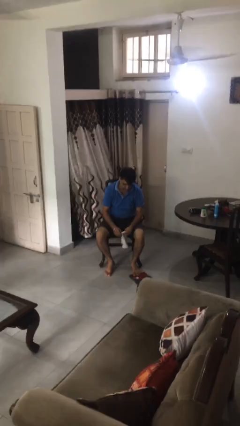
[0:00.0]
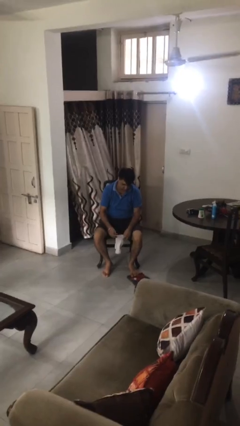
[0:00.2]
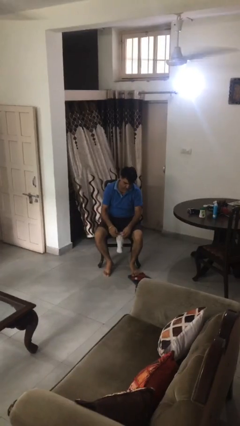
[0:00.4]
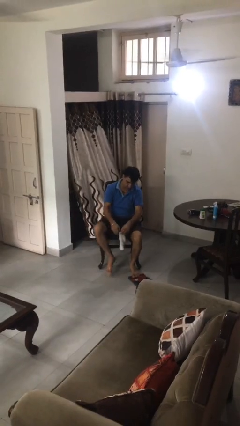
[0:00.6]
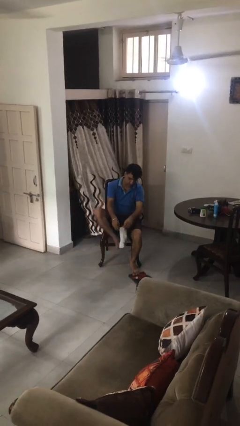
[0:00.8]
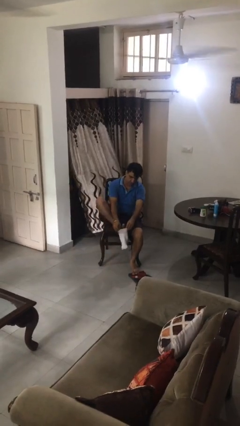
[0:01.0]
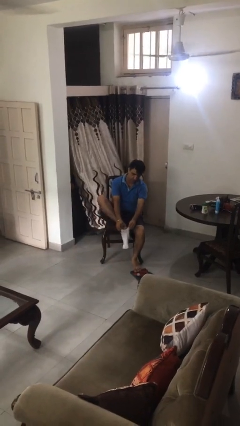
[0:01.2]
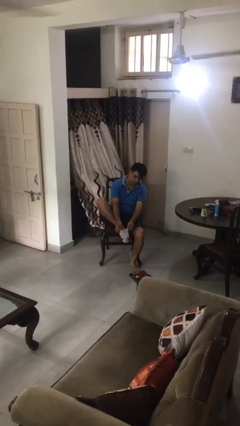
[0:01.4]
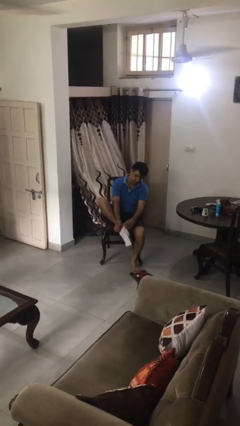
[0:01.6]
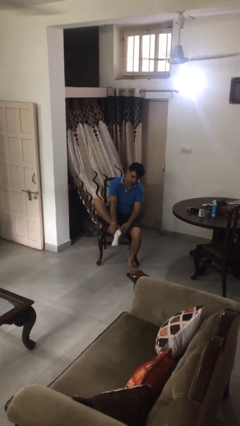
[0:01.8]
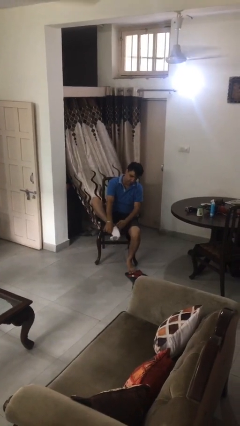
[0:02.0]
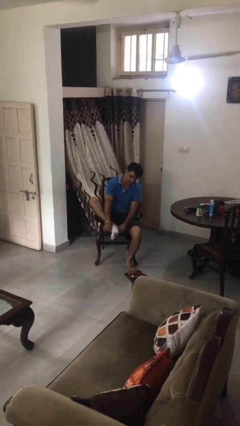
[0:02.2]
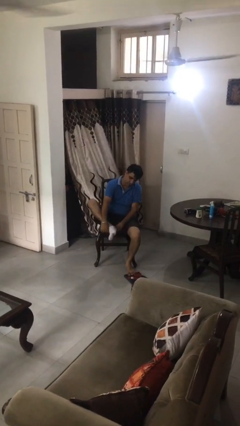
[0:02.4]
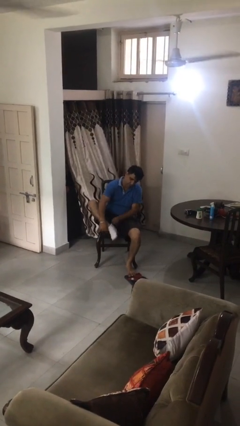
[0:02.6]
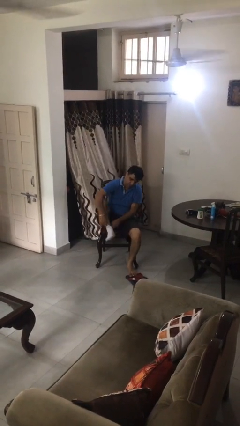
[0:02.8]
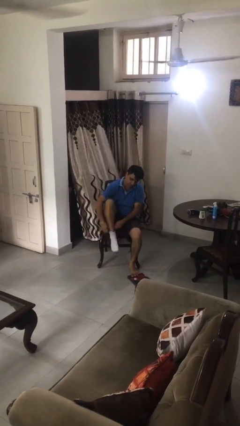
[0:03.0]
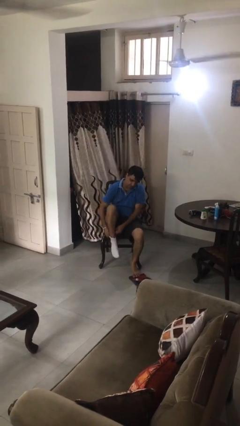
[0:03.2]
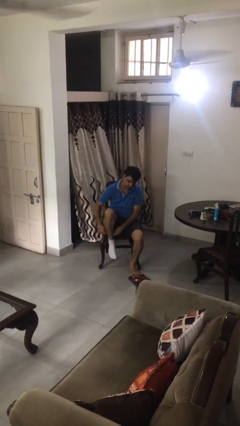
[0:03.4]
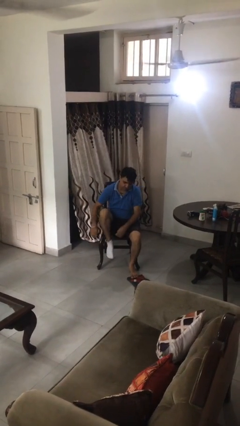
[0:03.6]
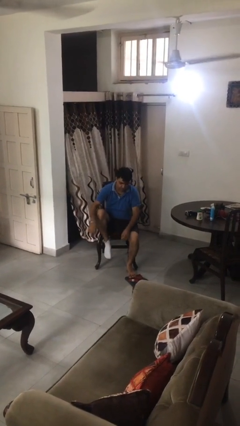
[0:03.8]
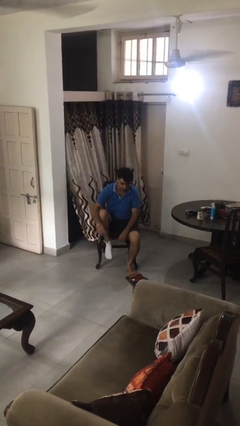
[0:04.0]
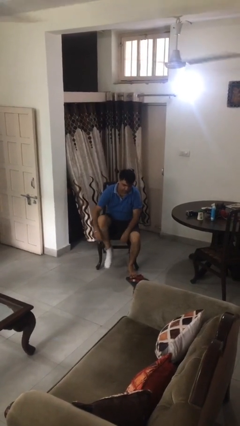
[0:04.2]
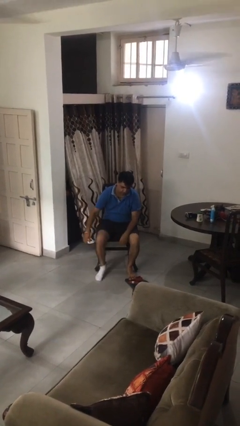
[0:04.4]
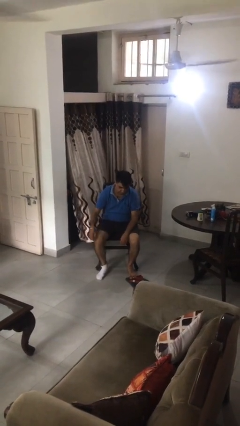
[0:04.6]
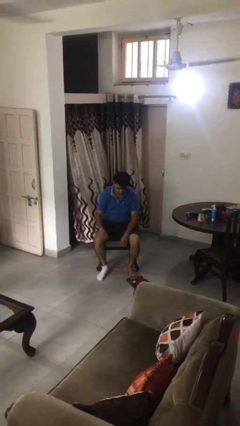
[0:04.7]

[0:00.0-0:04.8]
person puts on socks

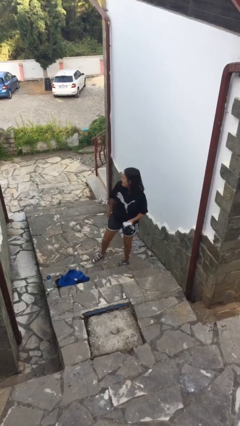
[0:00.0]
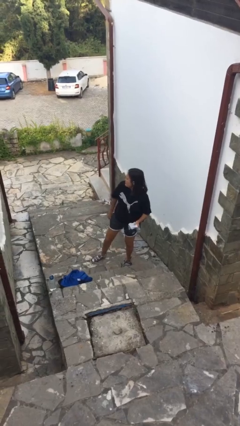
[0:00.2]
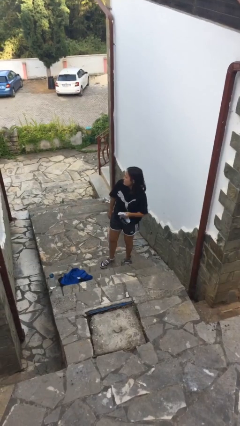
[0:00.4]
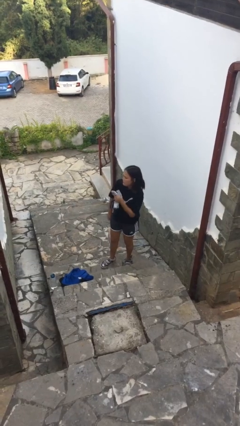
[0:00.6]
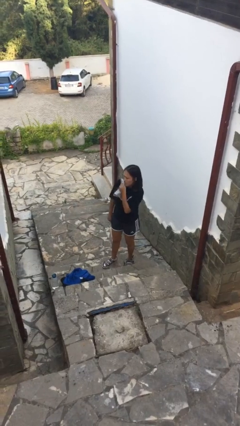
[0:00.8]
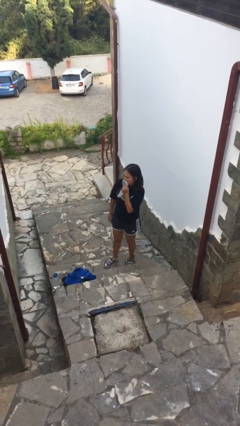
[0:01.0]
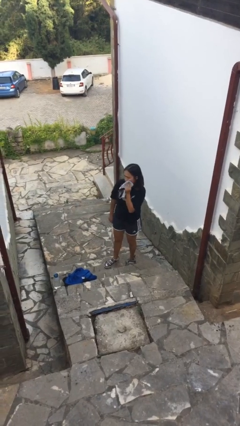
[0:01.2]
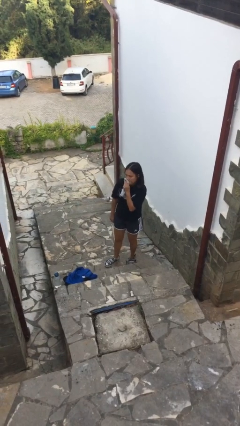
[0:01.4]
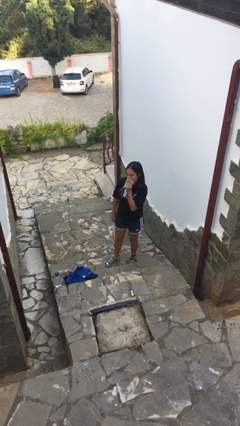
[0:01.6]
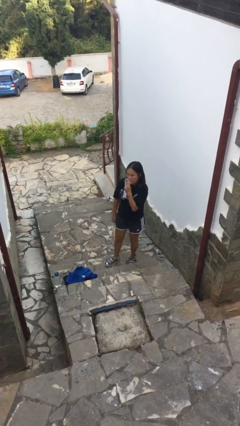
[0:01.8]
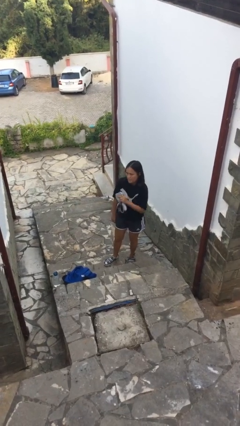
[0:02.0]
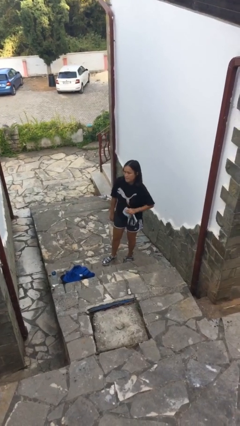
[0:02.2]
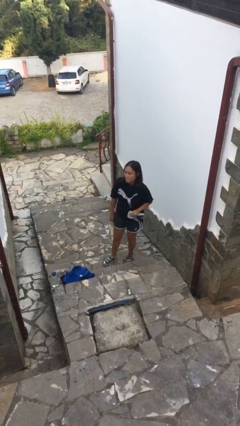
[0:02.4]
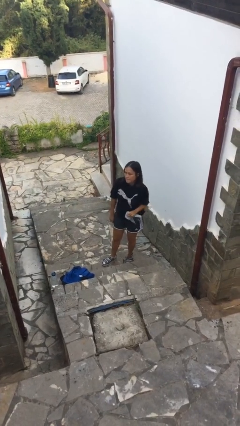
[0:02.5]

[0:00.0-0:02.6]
person wipes mouth with napkin

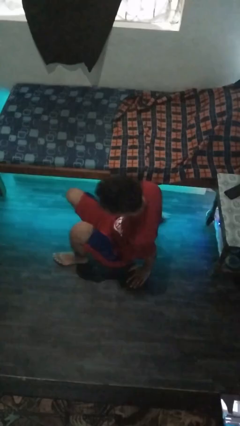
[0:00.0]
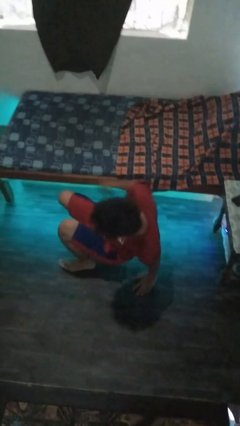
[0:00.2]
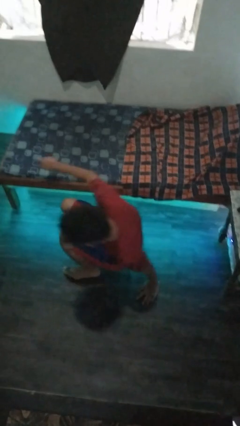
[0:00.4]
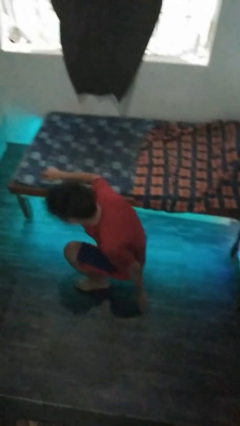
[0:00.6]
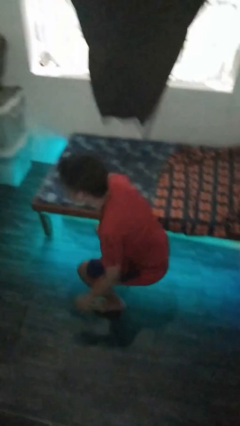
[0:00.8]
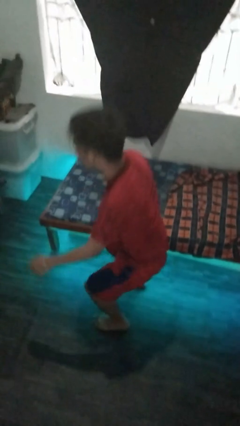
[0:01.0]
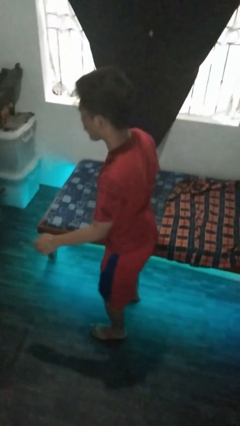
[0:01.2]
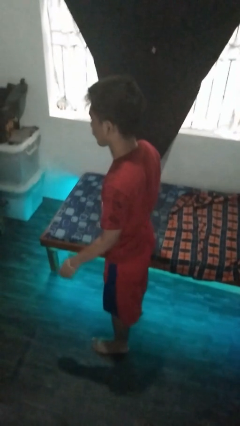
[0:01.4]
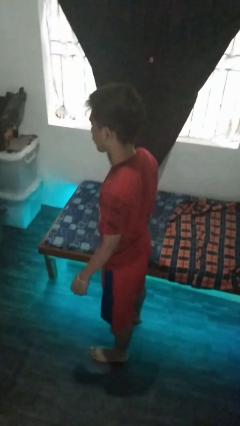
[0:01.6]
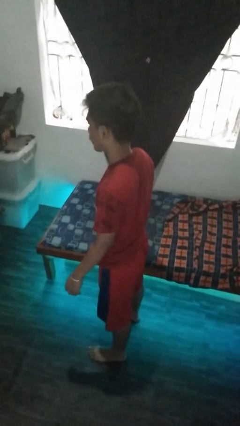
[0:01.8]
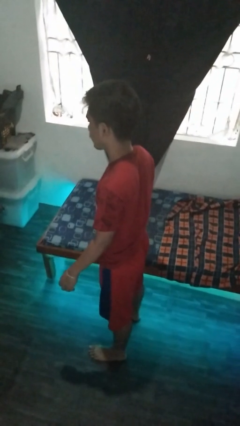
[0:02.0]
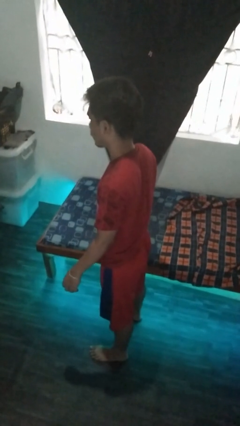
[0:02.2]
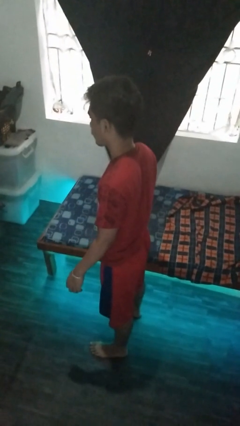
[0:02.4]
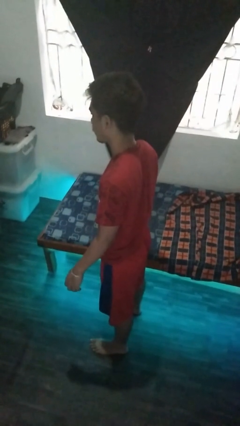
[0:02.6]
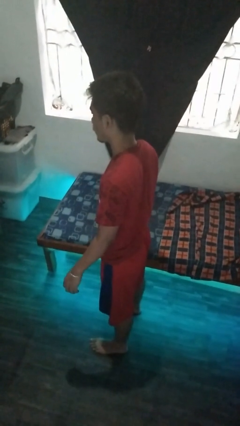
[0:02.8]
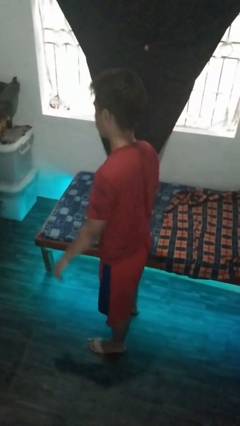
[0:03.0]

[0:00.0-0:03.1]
person stands up from floor

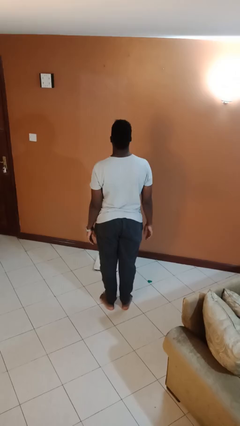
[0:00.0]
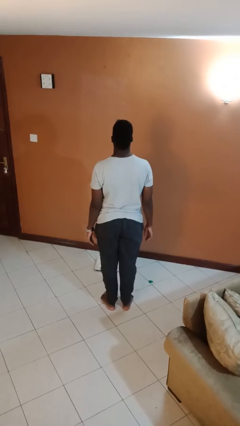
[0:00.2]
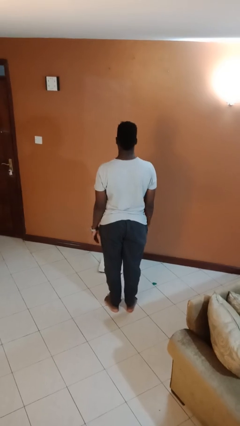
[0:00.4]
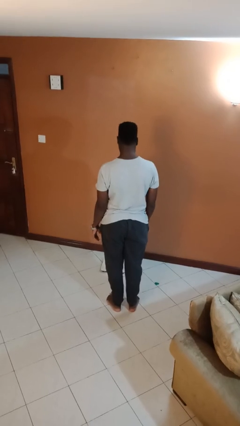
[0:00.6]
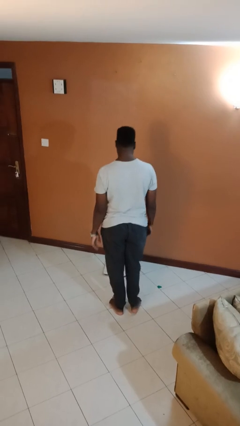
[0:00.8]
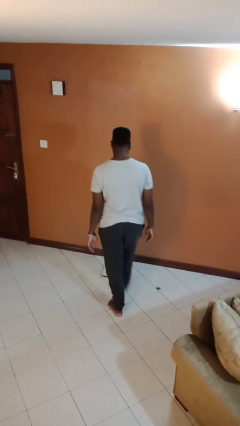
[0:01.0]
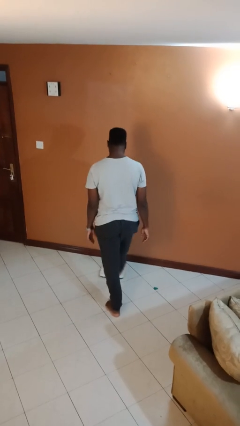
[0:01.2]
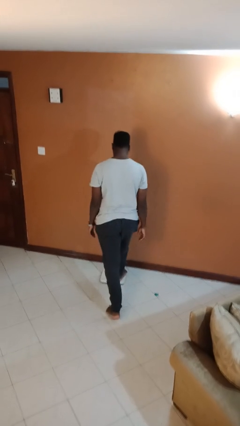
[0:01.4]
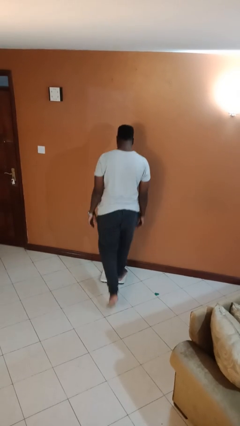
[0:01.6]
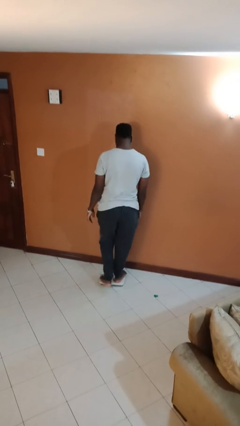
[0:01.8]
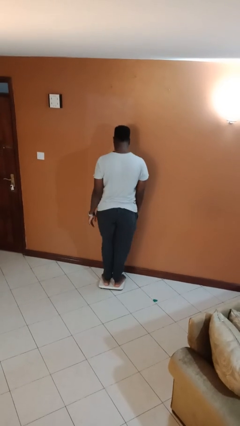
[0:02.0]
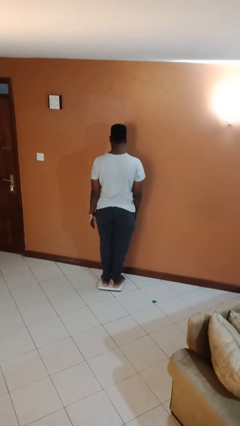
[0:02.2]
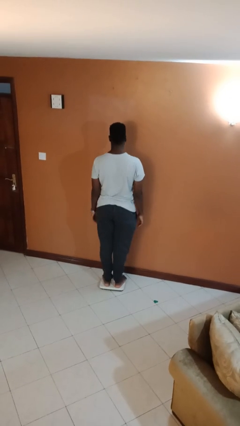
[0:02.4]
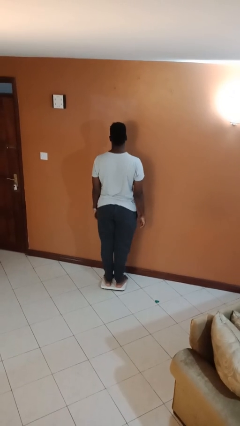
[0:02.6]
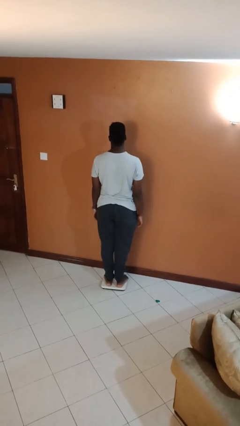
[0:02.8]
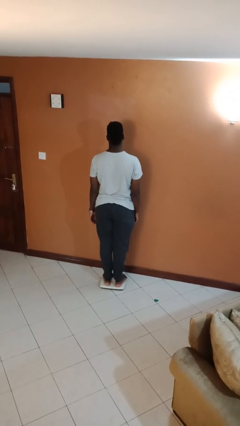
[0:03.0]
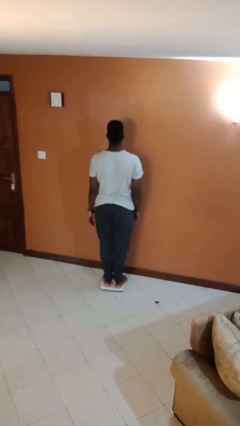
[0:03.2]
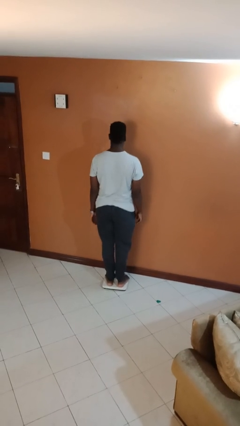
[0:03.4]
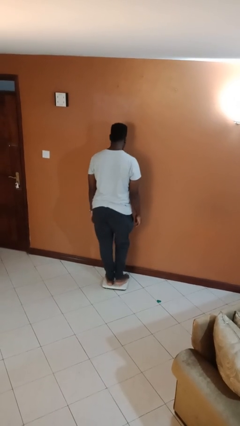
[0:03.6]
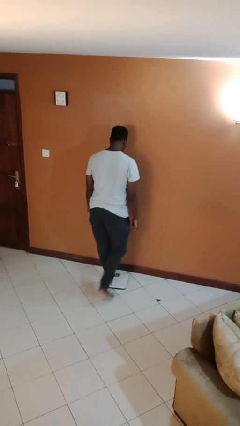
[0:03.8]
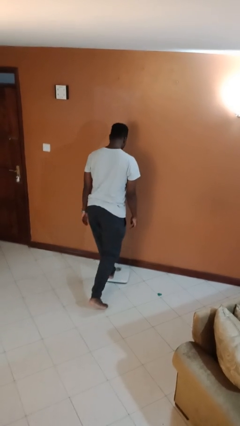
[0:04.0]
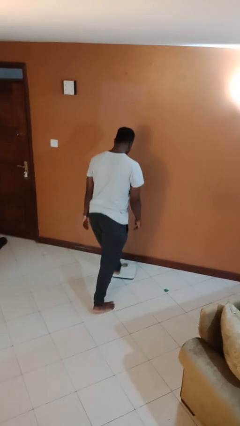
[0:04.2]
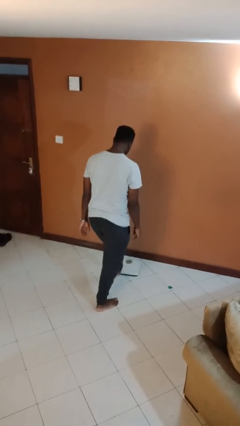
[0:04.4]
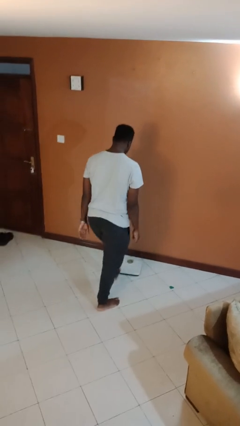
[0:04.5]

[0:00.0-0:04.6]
person uses bodyweight scale

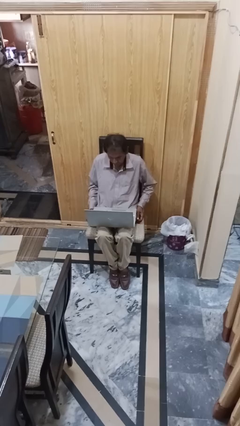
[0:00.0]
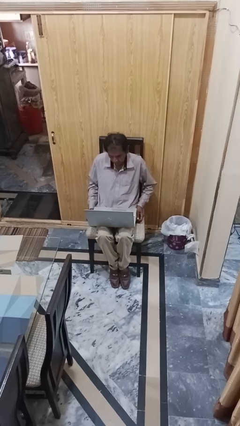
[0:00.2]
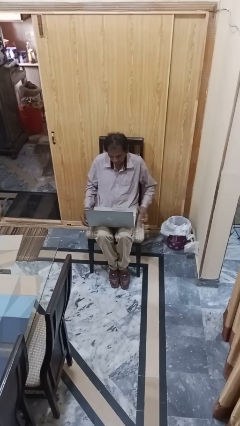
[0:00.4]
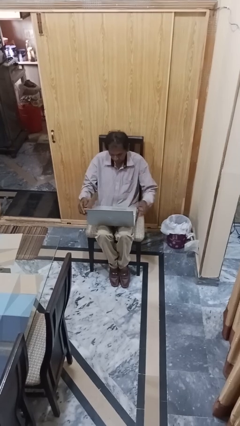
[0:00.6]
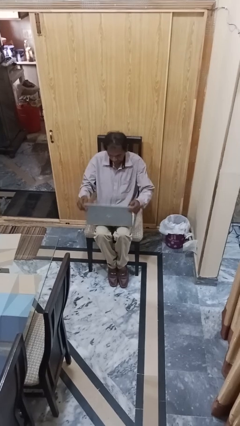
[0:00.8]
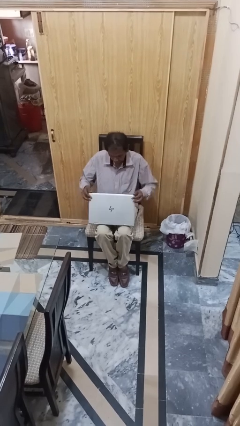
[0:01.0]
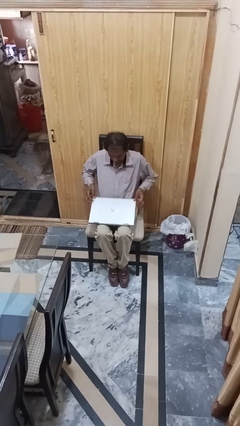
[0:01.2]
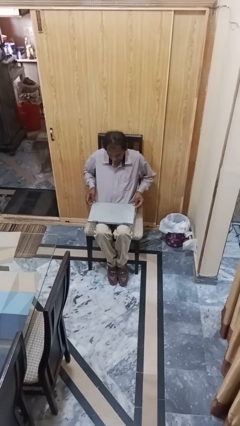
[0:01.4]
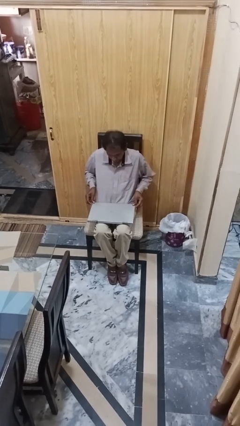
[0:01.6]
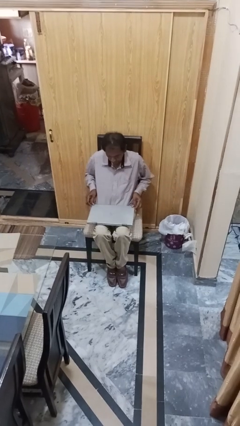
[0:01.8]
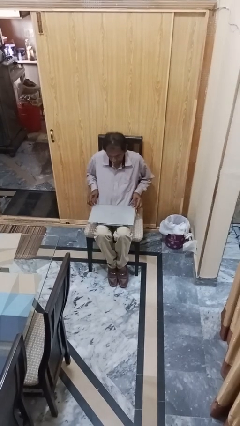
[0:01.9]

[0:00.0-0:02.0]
person closes laptop

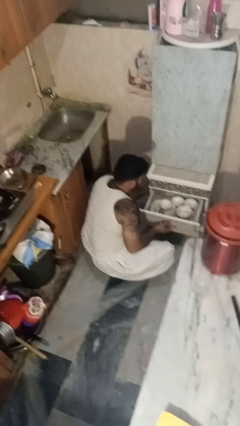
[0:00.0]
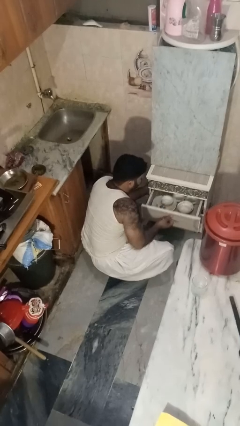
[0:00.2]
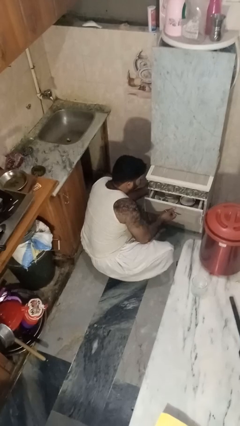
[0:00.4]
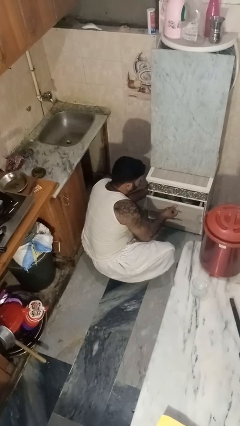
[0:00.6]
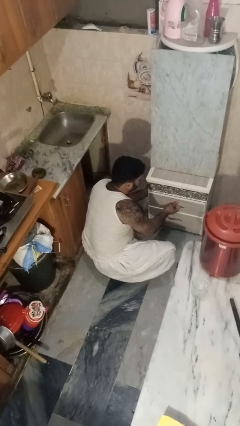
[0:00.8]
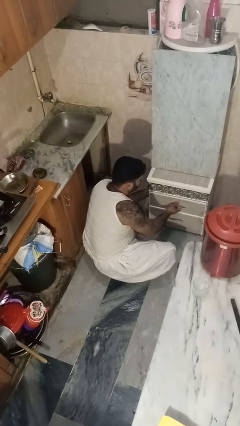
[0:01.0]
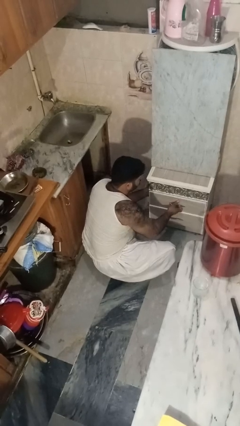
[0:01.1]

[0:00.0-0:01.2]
person closes kitchen drawer
